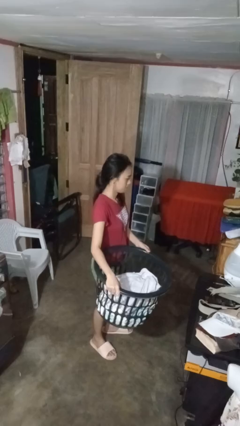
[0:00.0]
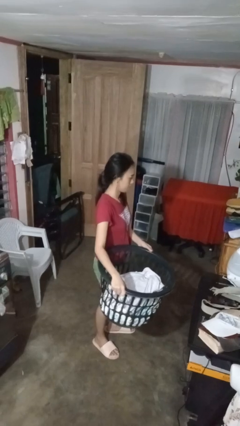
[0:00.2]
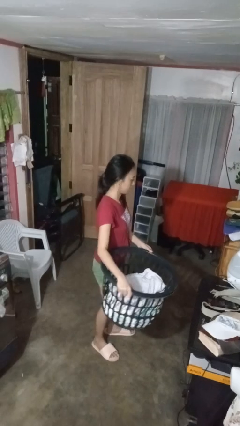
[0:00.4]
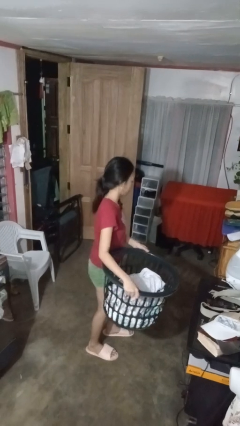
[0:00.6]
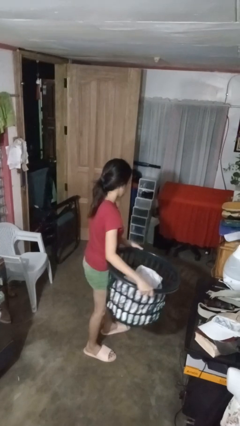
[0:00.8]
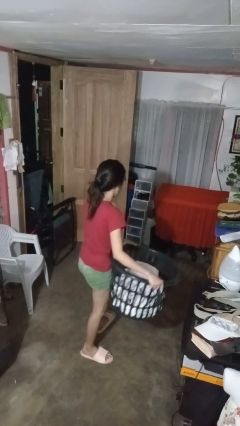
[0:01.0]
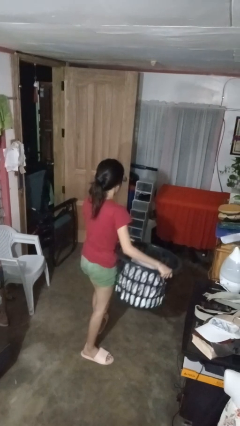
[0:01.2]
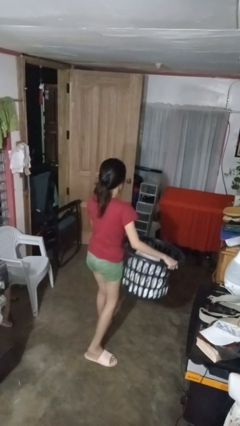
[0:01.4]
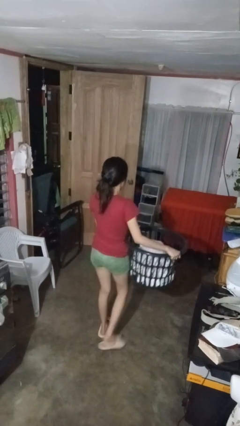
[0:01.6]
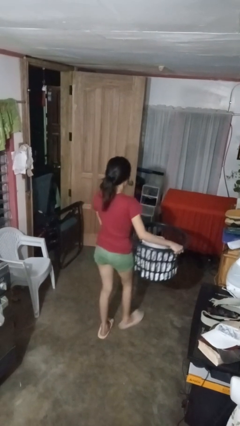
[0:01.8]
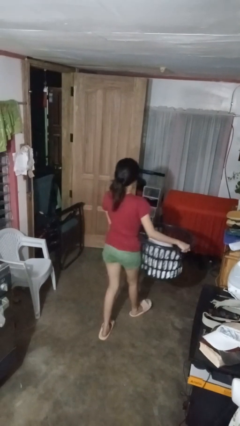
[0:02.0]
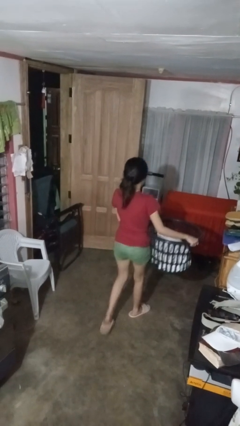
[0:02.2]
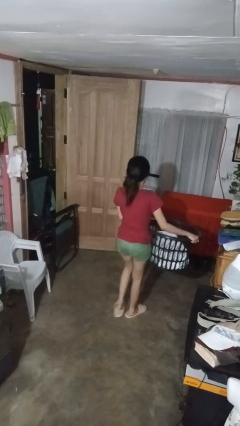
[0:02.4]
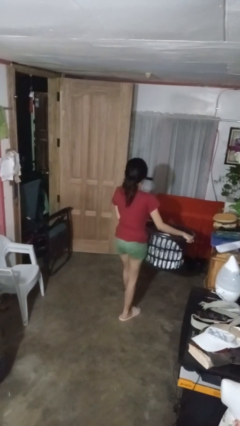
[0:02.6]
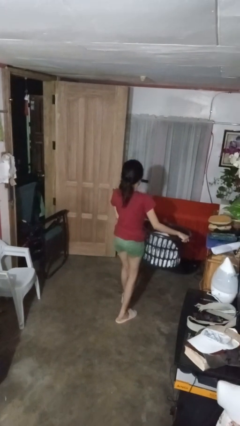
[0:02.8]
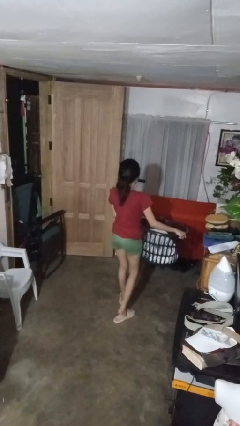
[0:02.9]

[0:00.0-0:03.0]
person carries laundry basket

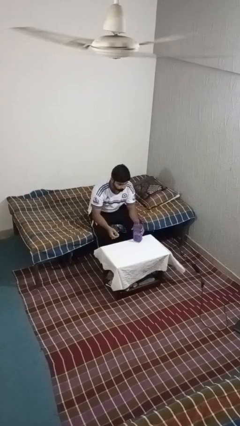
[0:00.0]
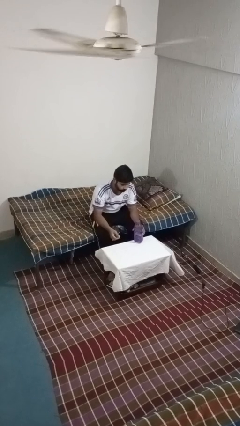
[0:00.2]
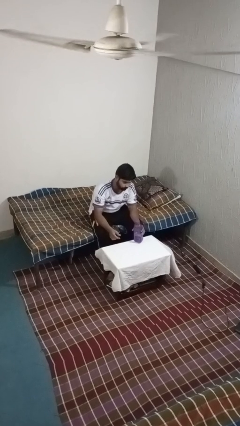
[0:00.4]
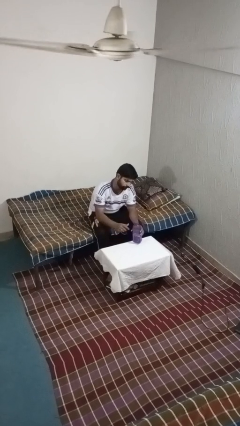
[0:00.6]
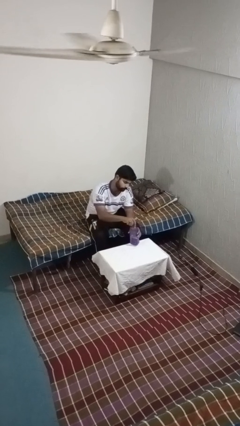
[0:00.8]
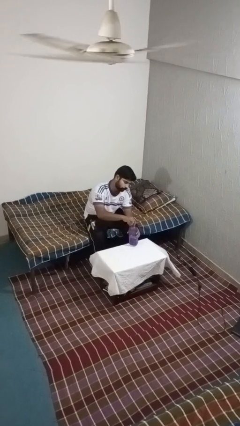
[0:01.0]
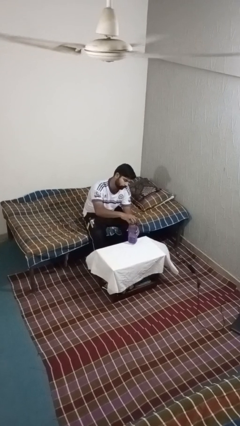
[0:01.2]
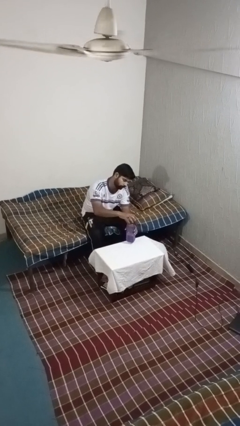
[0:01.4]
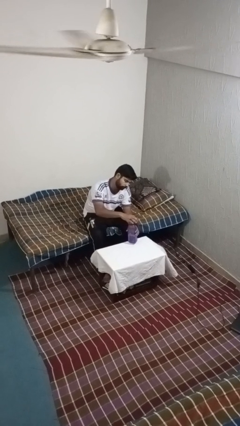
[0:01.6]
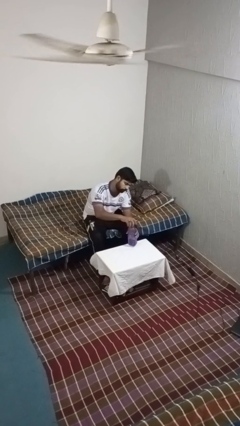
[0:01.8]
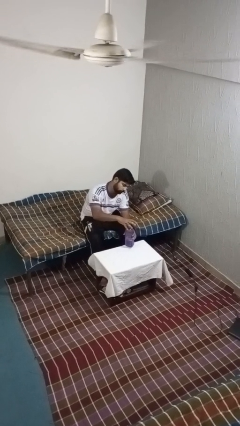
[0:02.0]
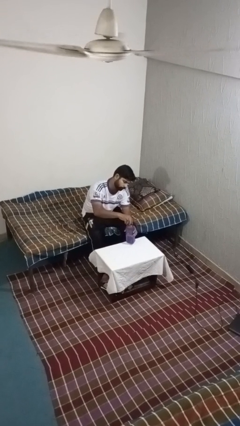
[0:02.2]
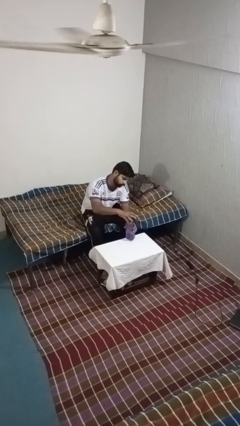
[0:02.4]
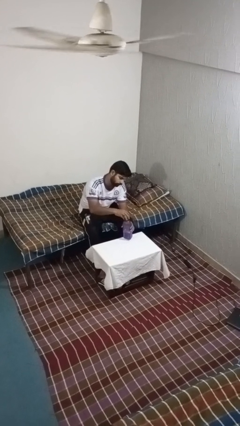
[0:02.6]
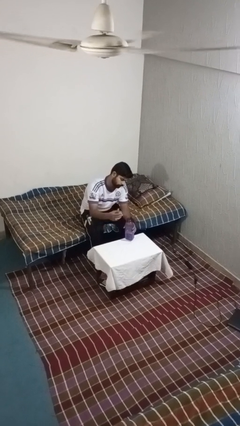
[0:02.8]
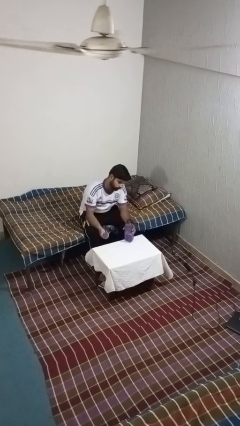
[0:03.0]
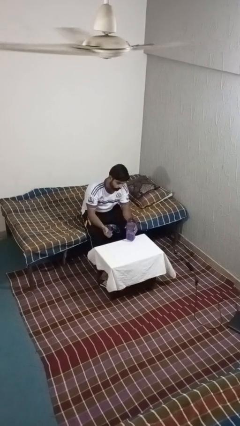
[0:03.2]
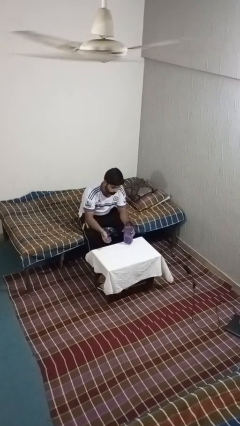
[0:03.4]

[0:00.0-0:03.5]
person unscrews lid from bottle

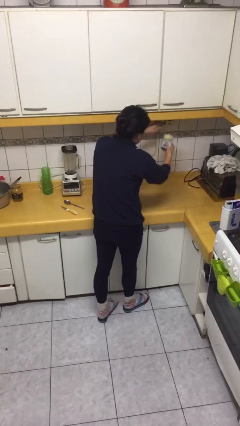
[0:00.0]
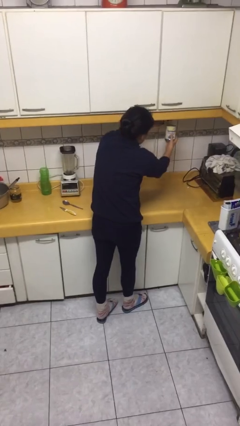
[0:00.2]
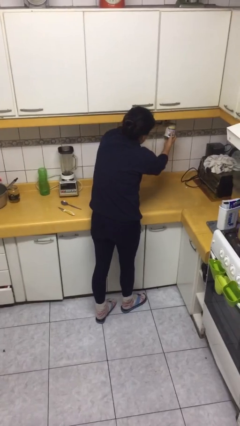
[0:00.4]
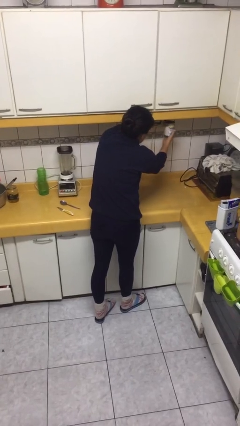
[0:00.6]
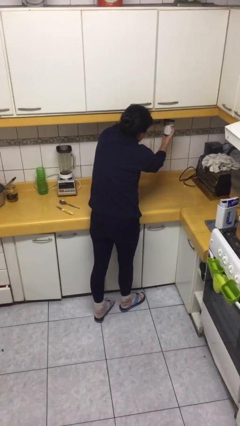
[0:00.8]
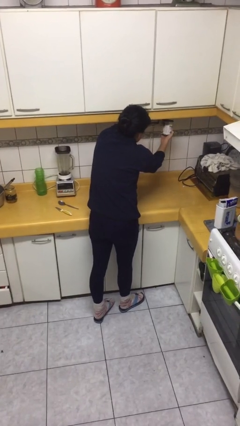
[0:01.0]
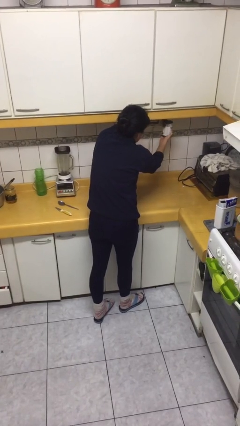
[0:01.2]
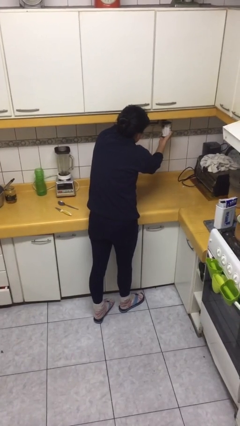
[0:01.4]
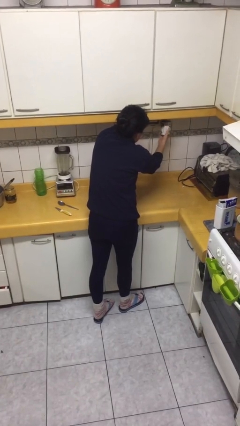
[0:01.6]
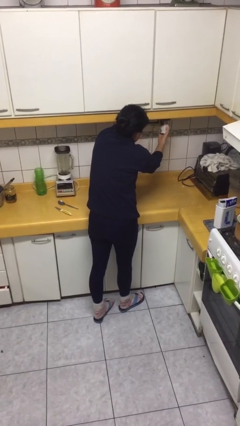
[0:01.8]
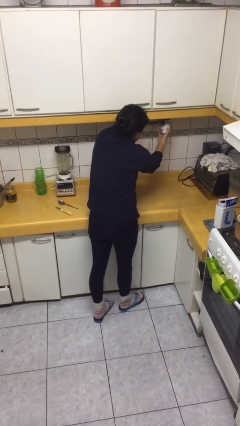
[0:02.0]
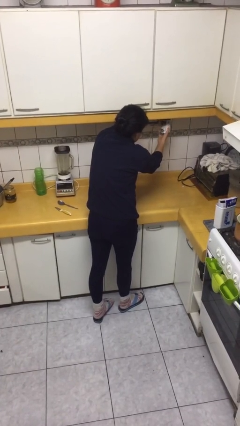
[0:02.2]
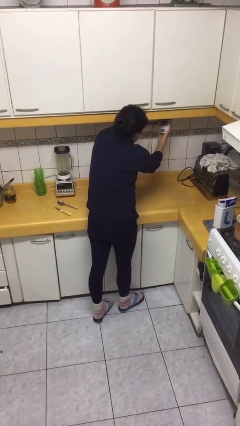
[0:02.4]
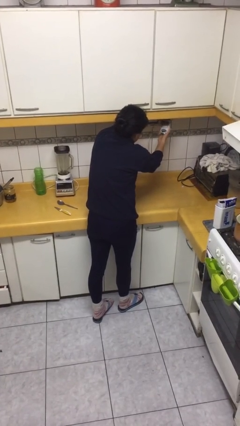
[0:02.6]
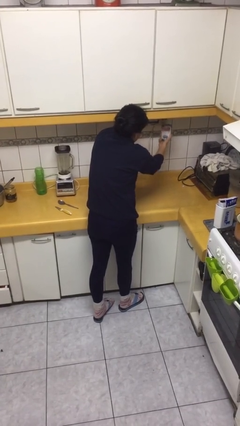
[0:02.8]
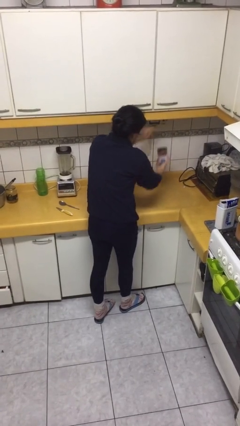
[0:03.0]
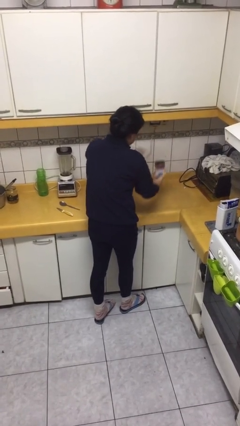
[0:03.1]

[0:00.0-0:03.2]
person opens can with can opener

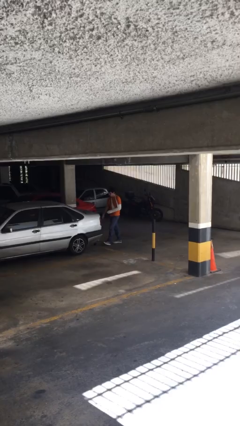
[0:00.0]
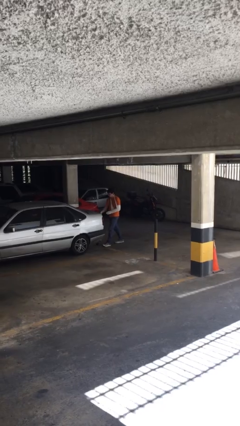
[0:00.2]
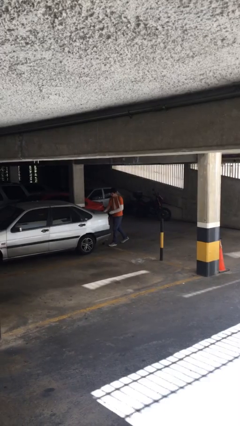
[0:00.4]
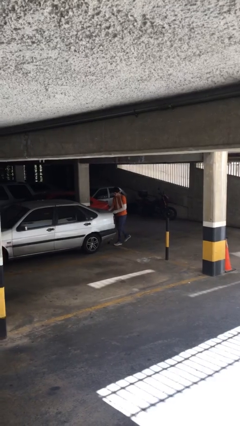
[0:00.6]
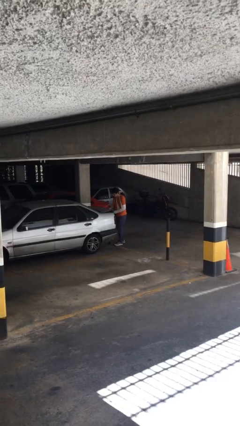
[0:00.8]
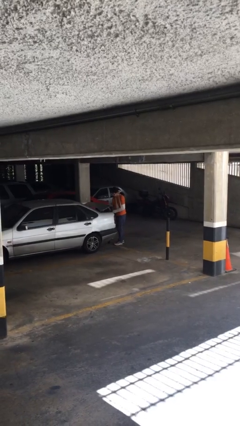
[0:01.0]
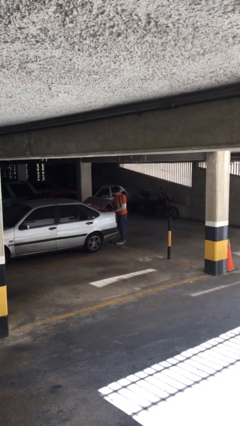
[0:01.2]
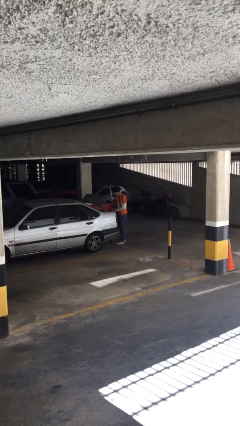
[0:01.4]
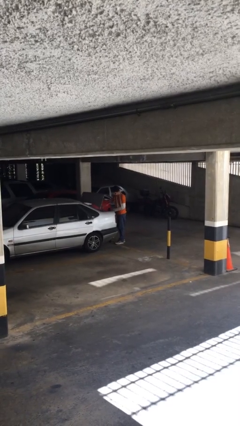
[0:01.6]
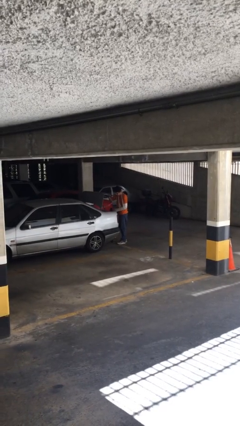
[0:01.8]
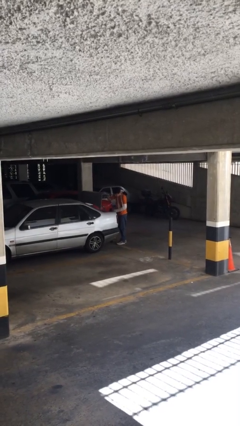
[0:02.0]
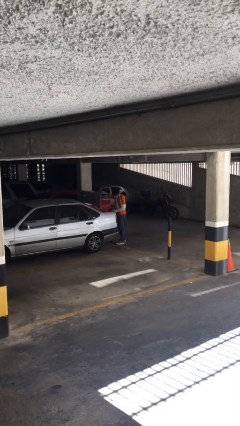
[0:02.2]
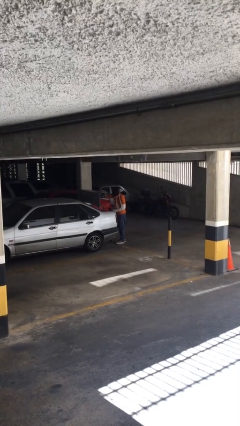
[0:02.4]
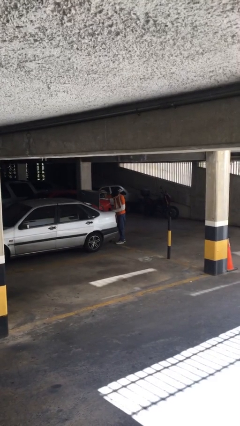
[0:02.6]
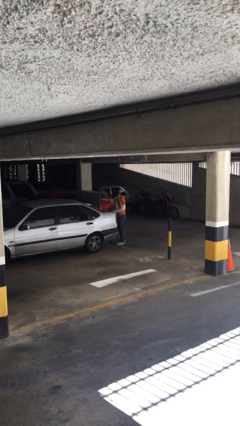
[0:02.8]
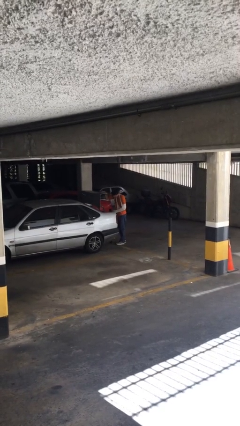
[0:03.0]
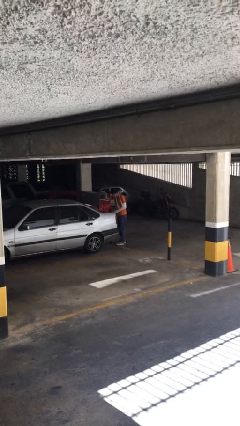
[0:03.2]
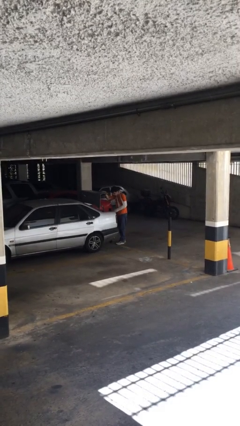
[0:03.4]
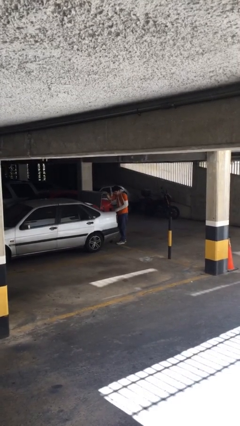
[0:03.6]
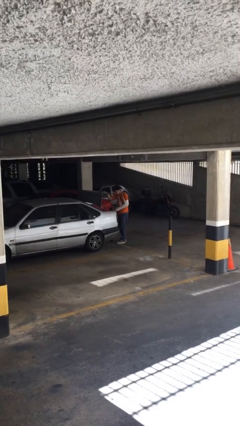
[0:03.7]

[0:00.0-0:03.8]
person opens car trunk

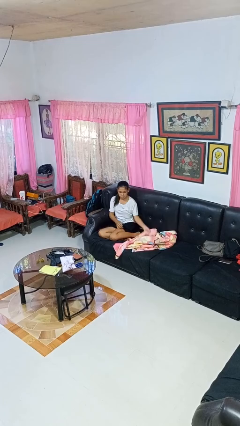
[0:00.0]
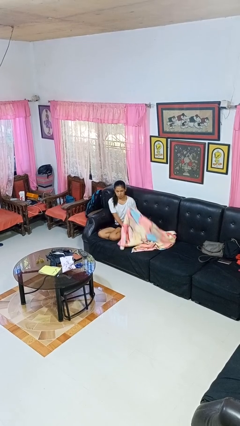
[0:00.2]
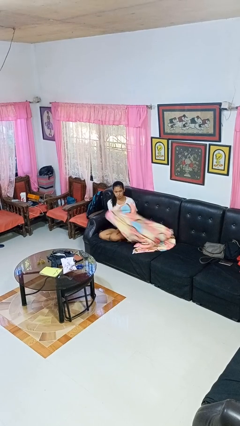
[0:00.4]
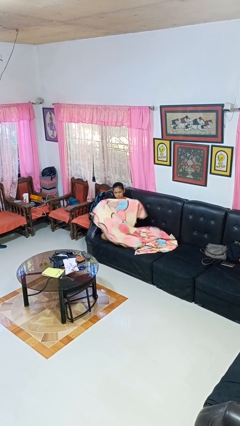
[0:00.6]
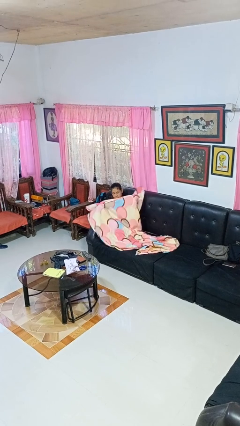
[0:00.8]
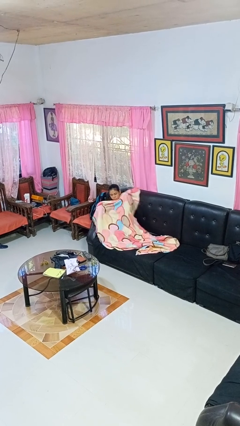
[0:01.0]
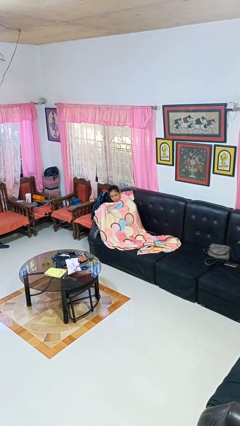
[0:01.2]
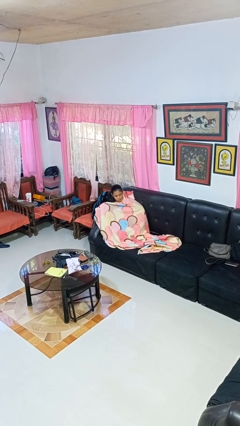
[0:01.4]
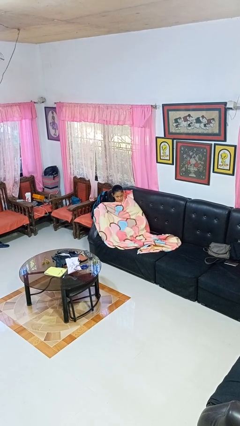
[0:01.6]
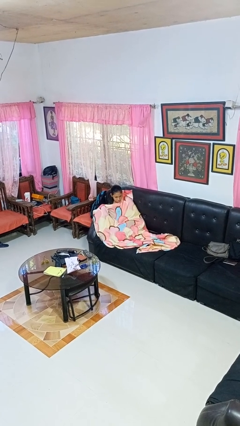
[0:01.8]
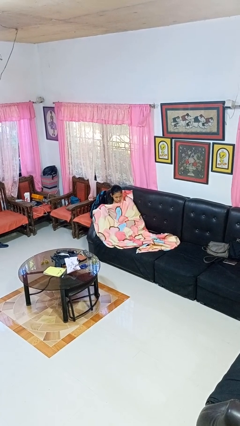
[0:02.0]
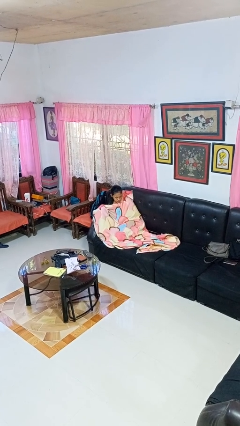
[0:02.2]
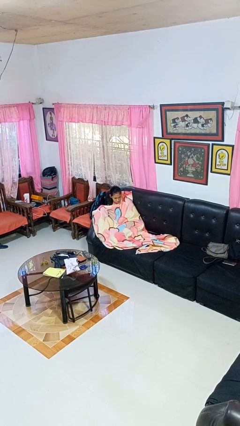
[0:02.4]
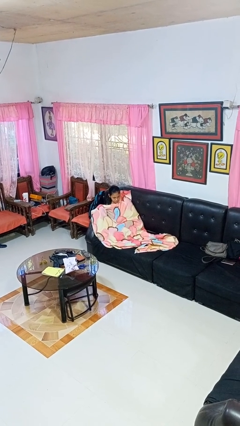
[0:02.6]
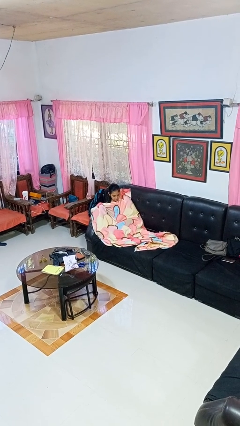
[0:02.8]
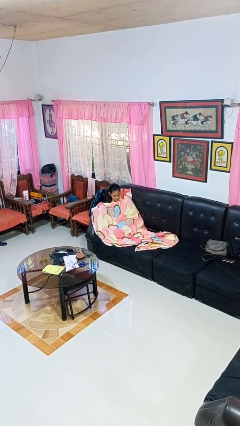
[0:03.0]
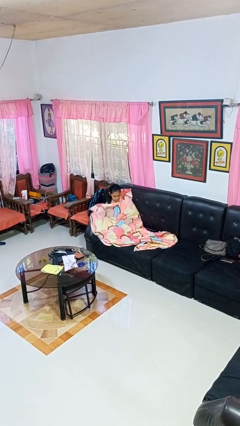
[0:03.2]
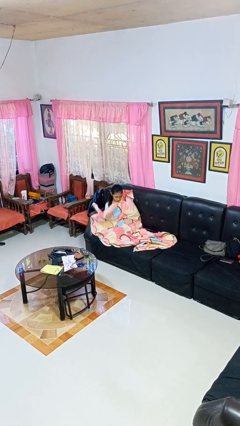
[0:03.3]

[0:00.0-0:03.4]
person covers with blanket

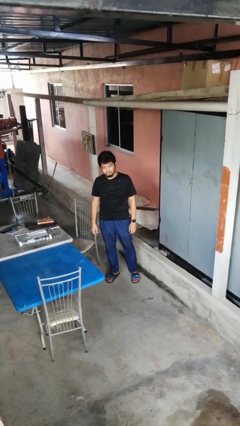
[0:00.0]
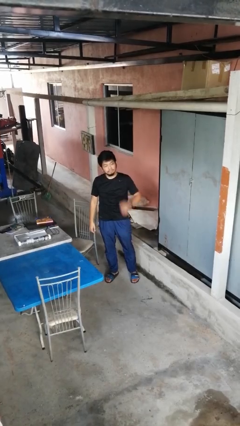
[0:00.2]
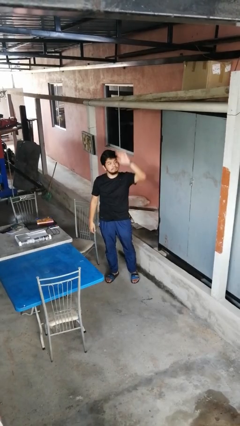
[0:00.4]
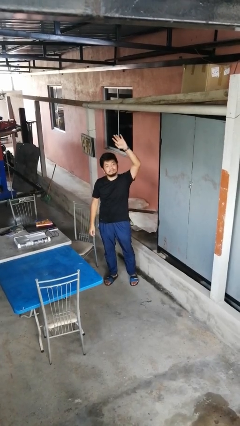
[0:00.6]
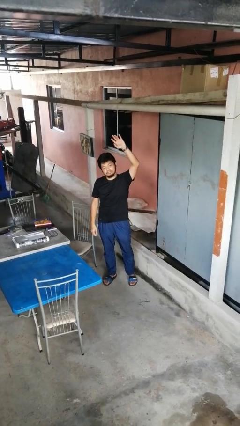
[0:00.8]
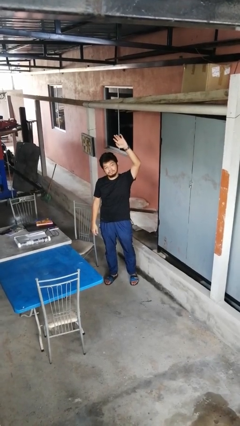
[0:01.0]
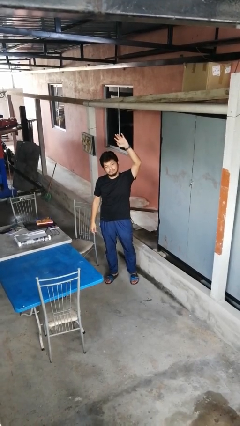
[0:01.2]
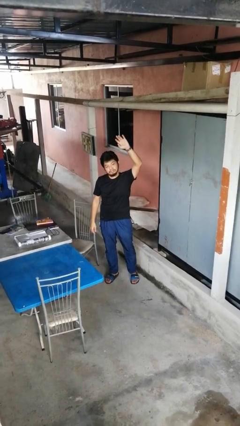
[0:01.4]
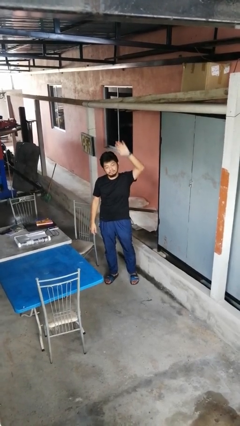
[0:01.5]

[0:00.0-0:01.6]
person gestures raise hand
